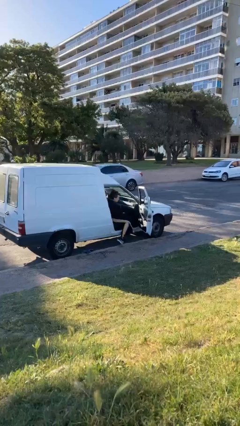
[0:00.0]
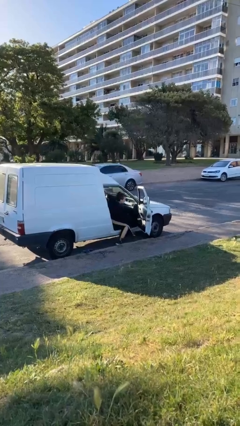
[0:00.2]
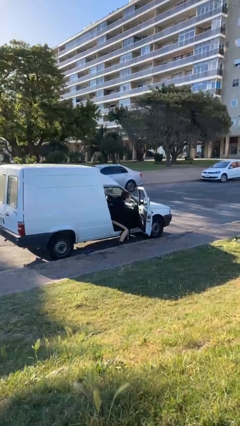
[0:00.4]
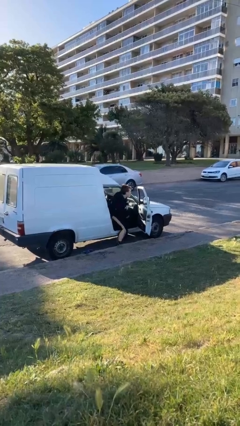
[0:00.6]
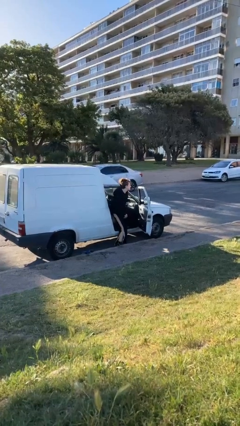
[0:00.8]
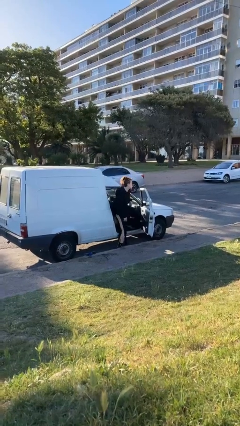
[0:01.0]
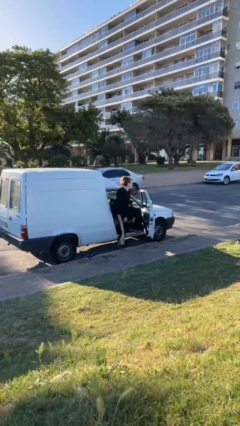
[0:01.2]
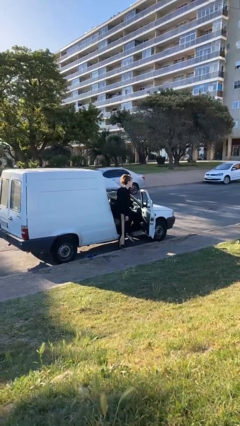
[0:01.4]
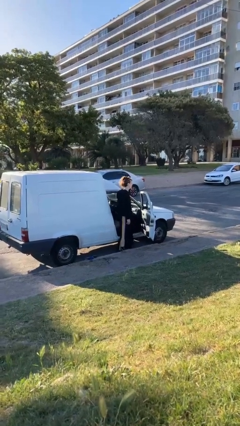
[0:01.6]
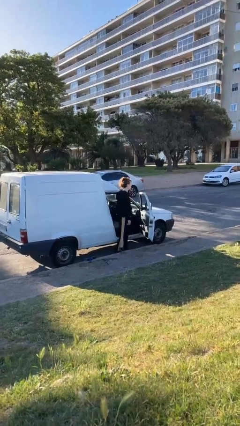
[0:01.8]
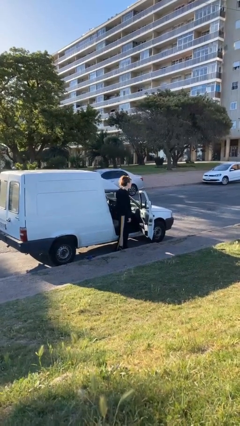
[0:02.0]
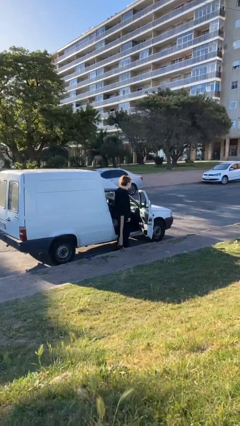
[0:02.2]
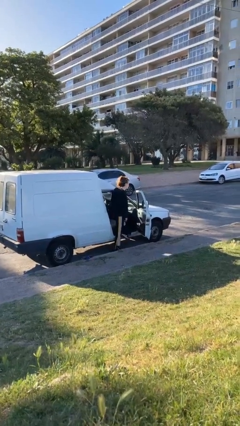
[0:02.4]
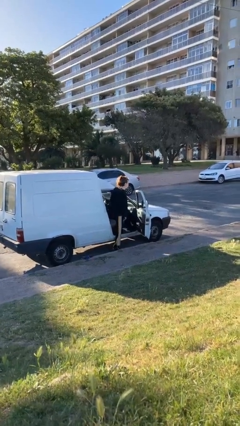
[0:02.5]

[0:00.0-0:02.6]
person exits car

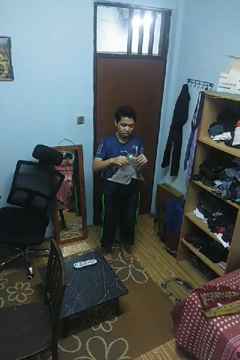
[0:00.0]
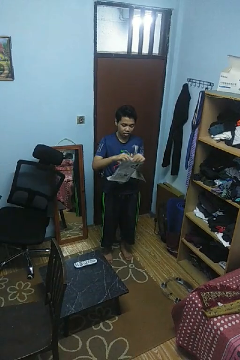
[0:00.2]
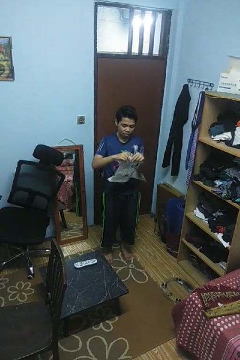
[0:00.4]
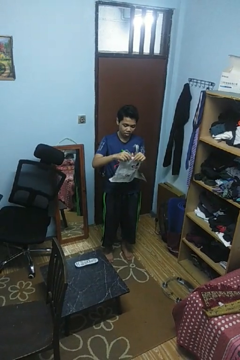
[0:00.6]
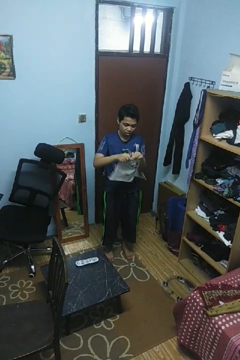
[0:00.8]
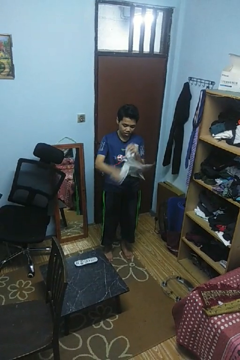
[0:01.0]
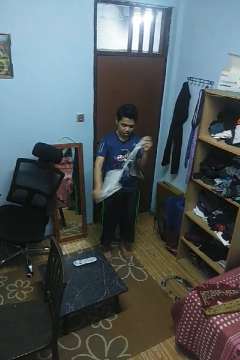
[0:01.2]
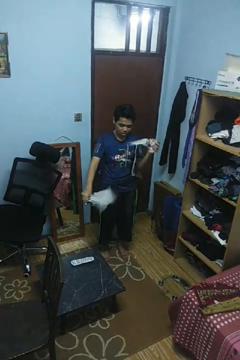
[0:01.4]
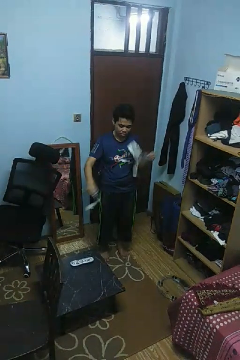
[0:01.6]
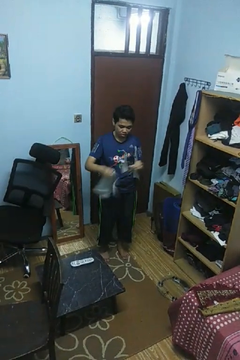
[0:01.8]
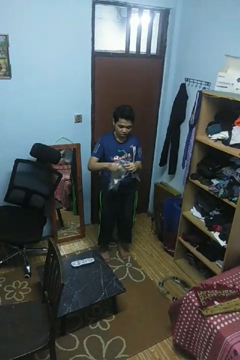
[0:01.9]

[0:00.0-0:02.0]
person tears paper

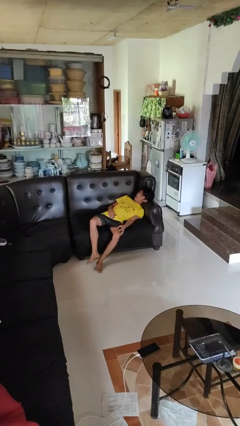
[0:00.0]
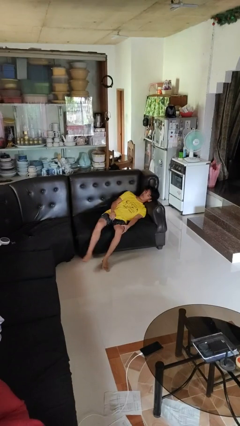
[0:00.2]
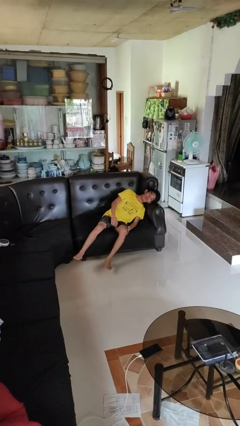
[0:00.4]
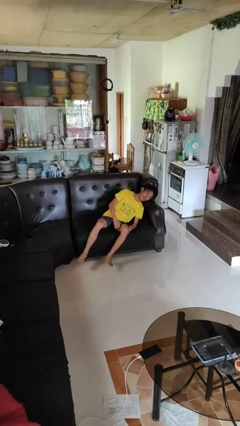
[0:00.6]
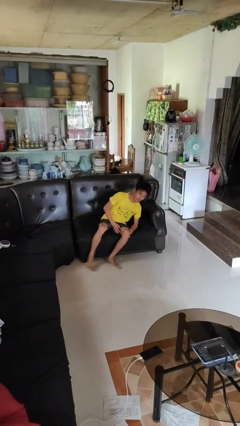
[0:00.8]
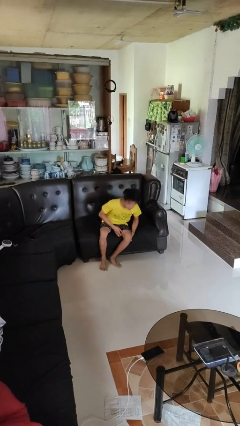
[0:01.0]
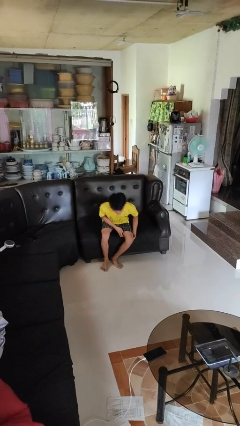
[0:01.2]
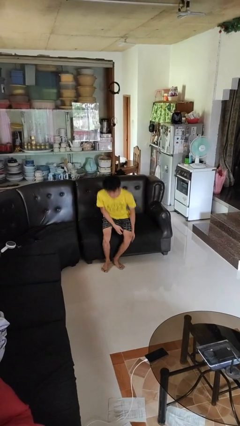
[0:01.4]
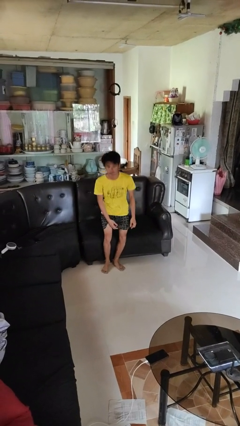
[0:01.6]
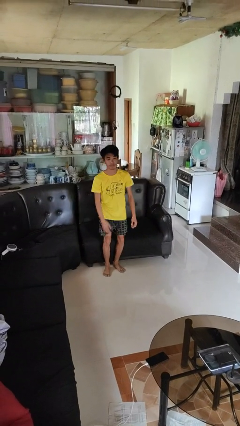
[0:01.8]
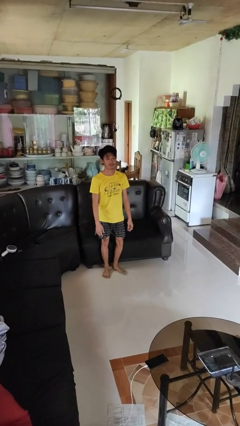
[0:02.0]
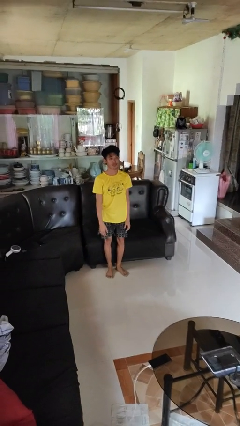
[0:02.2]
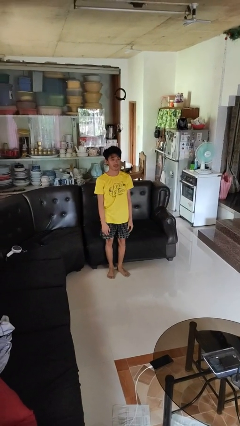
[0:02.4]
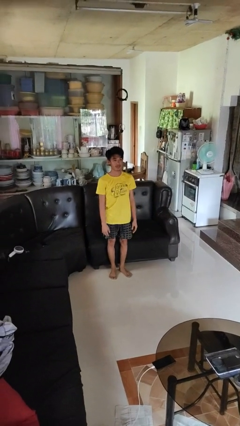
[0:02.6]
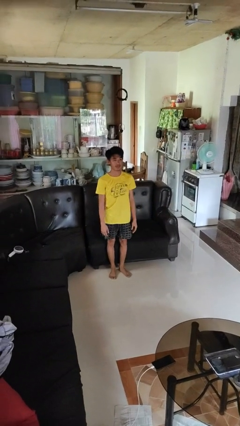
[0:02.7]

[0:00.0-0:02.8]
person stands up

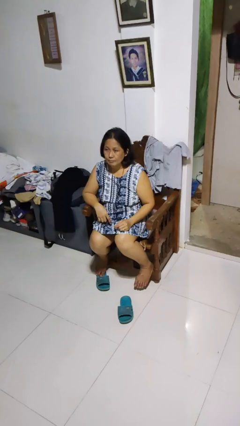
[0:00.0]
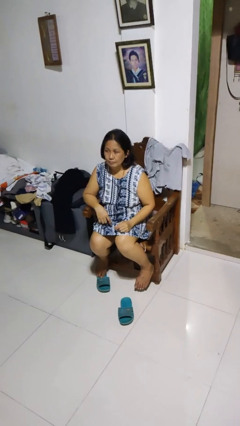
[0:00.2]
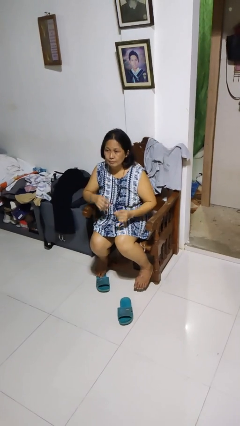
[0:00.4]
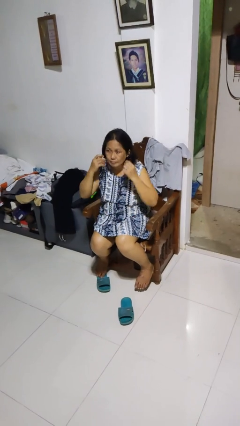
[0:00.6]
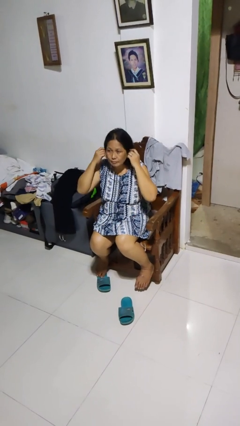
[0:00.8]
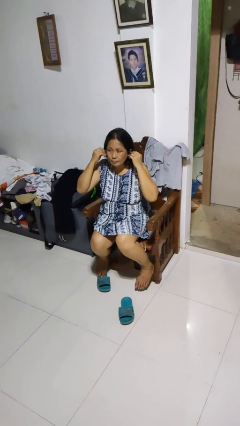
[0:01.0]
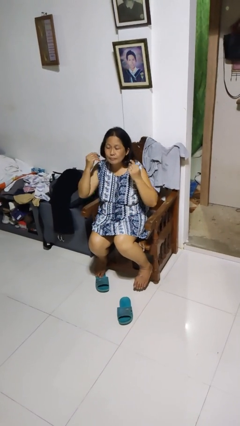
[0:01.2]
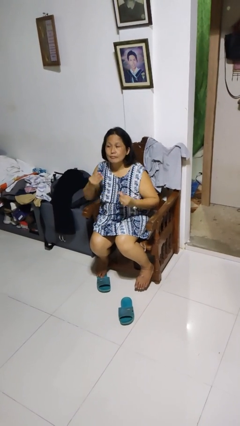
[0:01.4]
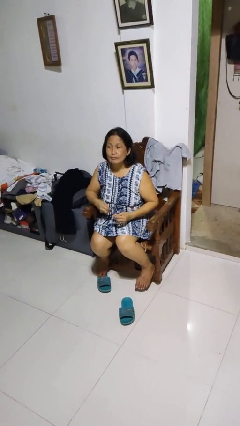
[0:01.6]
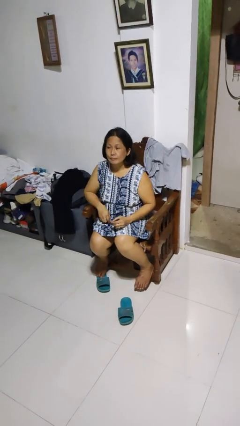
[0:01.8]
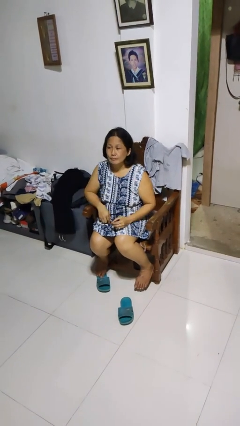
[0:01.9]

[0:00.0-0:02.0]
person takes off headphones

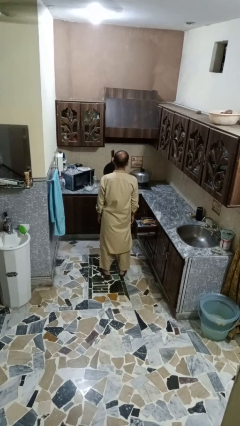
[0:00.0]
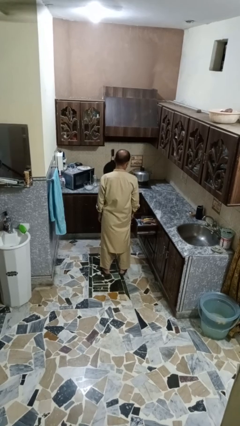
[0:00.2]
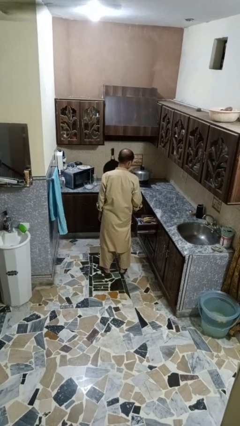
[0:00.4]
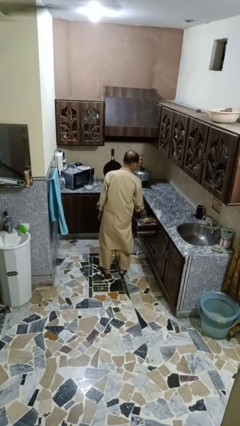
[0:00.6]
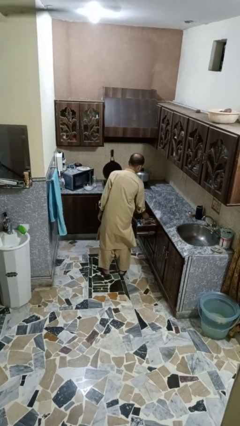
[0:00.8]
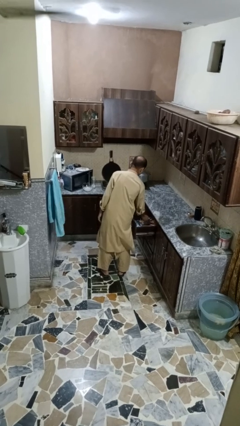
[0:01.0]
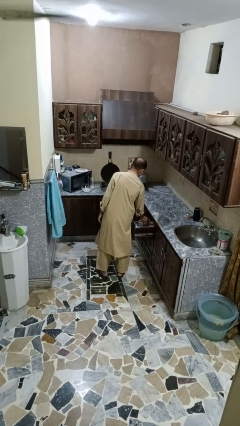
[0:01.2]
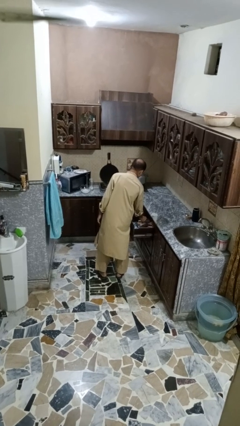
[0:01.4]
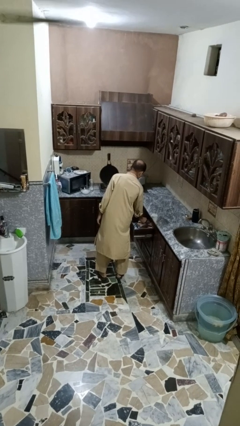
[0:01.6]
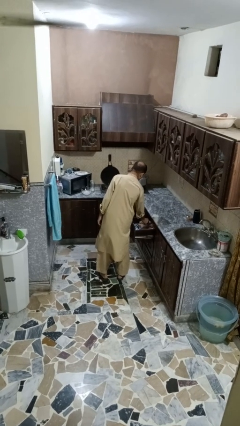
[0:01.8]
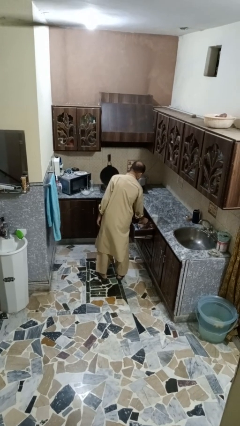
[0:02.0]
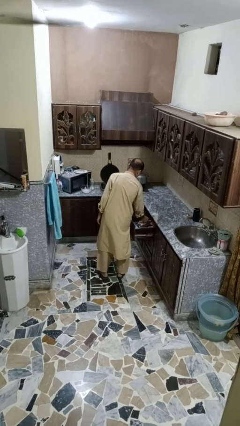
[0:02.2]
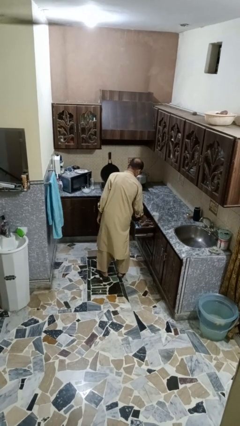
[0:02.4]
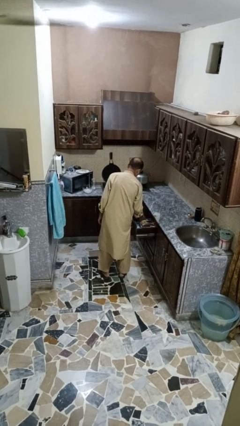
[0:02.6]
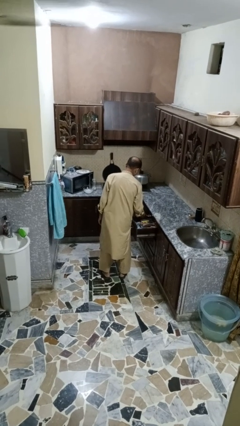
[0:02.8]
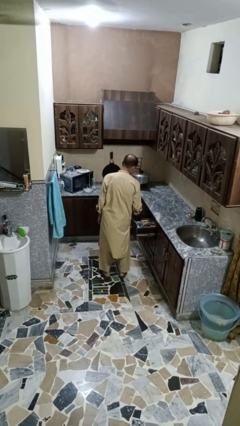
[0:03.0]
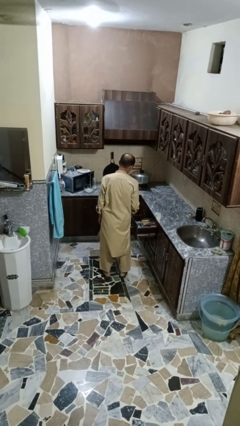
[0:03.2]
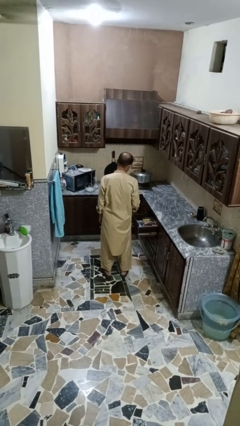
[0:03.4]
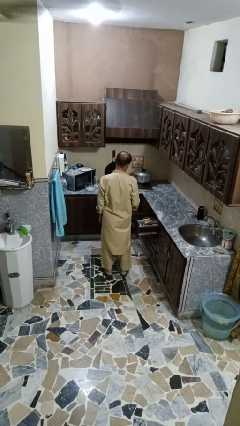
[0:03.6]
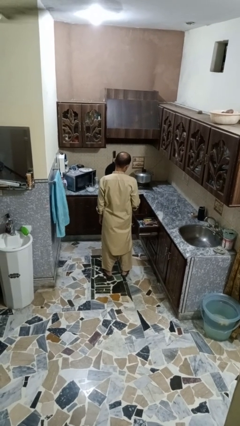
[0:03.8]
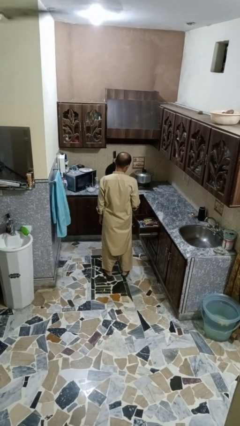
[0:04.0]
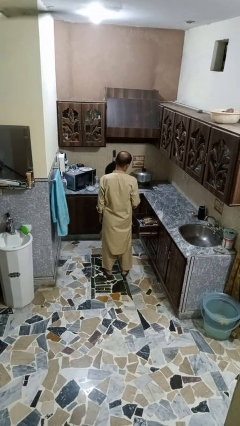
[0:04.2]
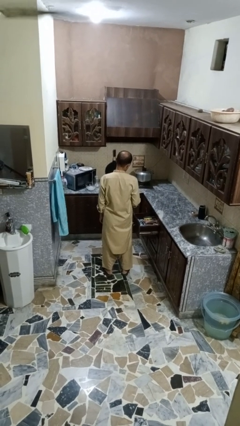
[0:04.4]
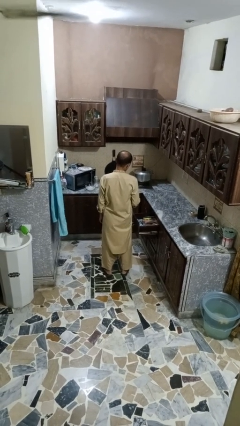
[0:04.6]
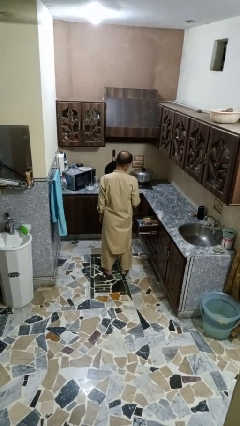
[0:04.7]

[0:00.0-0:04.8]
person takes object from kitchen drawer

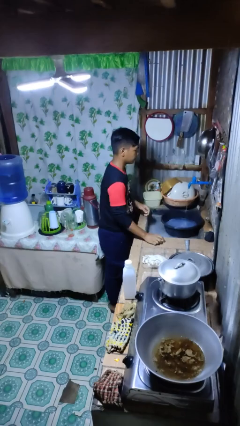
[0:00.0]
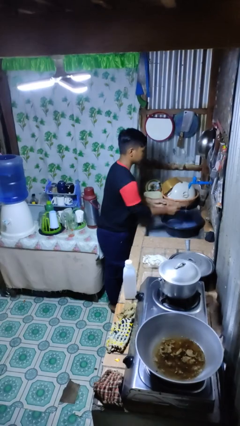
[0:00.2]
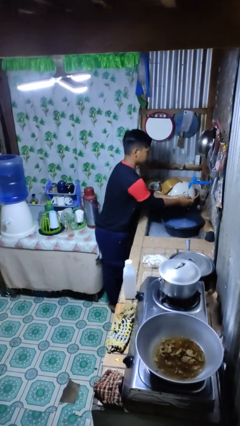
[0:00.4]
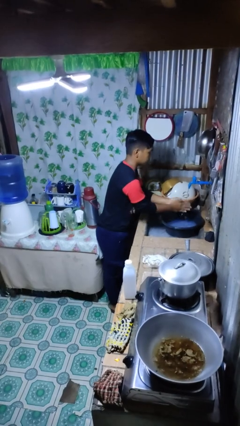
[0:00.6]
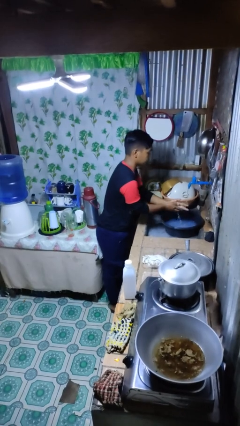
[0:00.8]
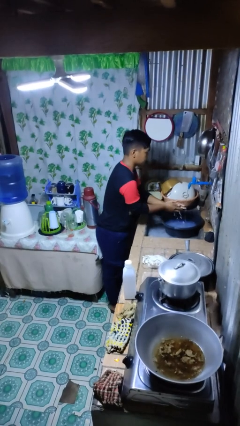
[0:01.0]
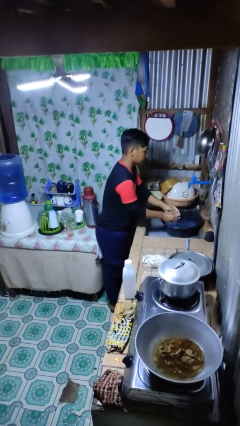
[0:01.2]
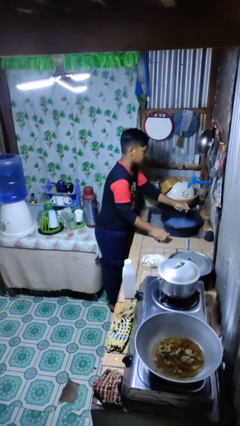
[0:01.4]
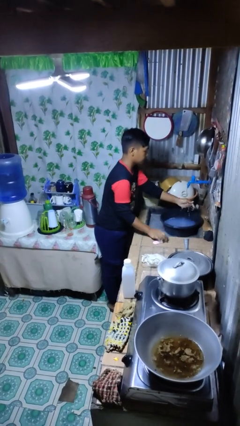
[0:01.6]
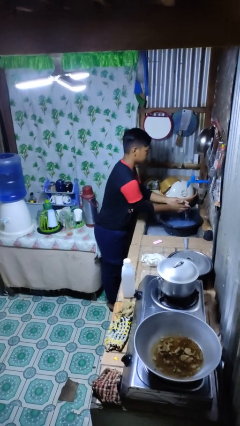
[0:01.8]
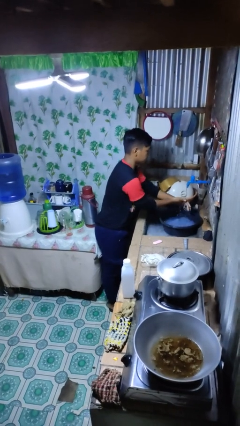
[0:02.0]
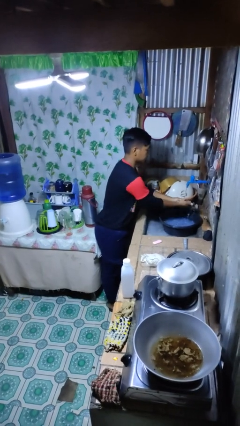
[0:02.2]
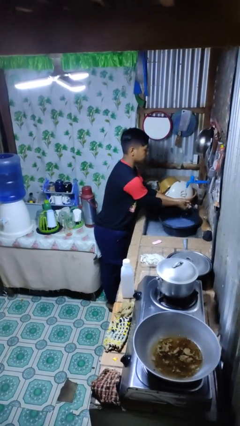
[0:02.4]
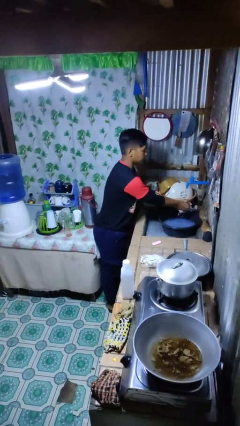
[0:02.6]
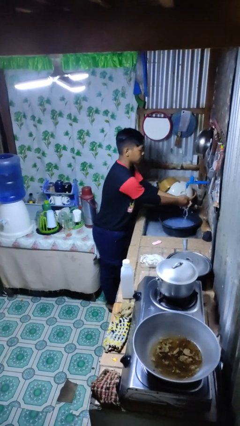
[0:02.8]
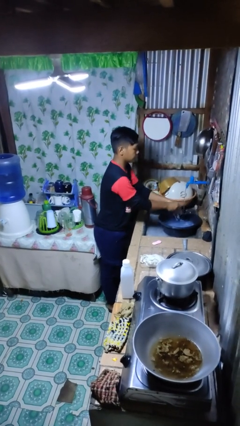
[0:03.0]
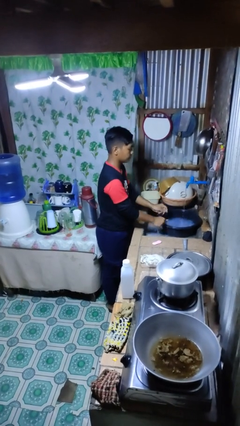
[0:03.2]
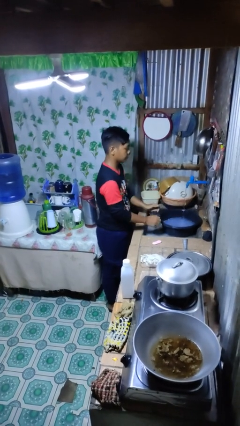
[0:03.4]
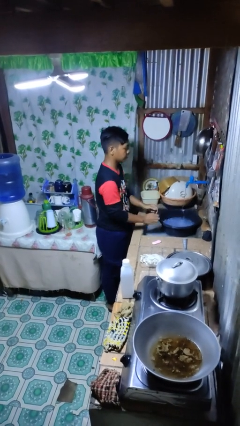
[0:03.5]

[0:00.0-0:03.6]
person washes hands
